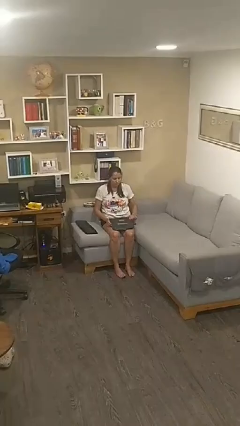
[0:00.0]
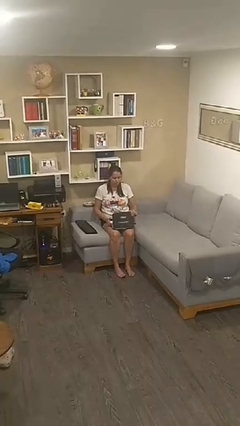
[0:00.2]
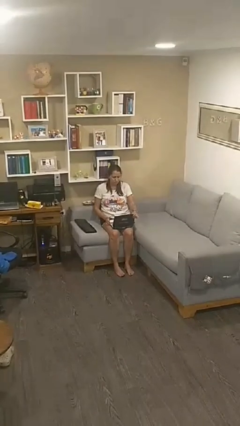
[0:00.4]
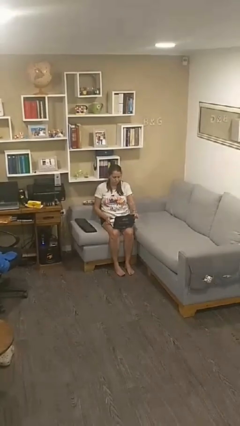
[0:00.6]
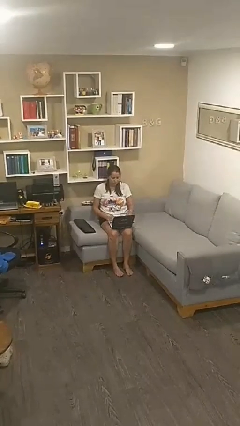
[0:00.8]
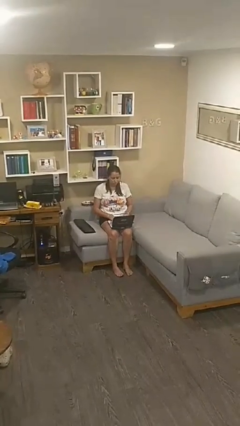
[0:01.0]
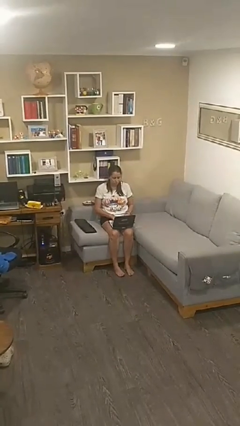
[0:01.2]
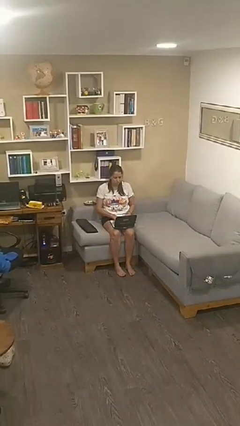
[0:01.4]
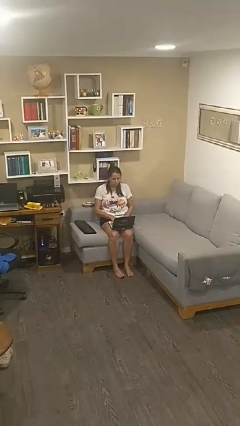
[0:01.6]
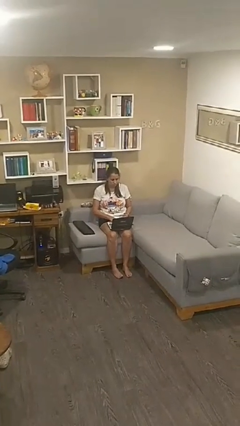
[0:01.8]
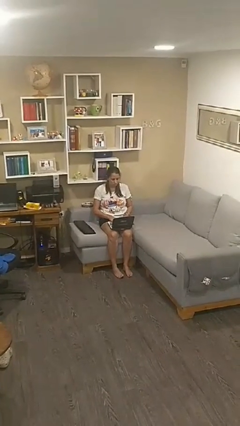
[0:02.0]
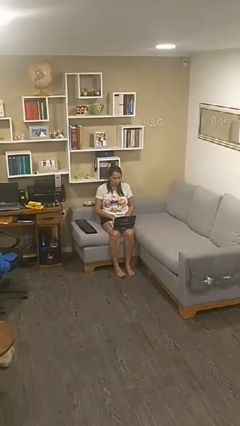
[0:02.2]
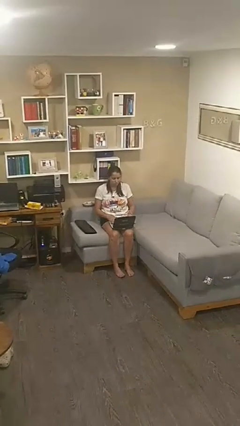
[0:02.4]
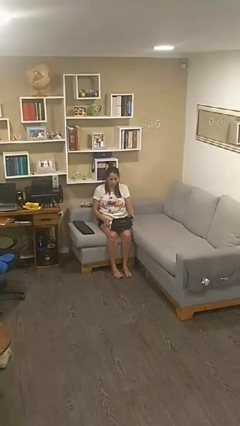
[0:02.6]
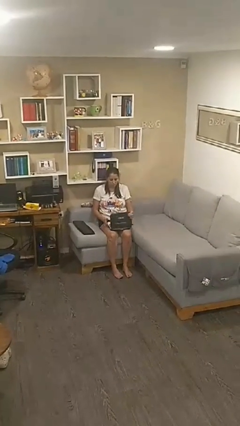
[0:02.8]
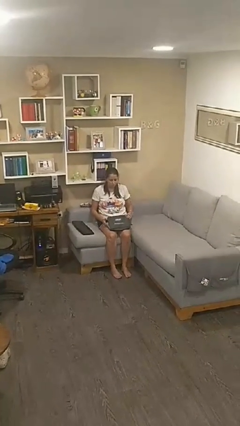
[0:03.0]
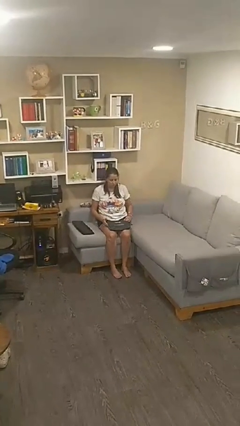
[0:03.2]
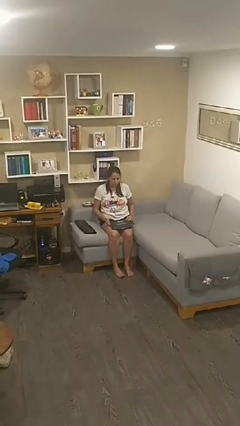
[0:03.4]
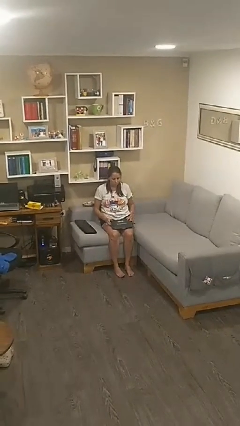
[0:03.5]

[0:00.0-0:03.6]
person interacts with laptop

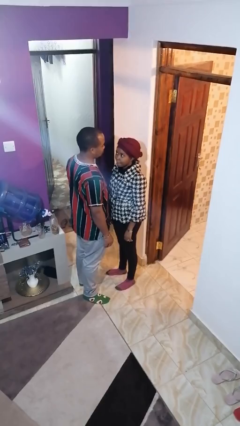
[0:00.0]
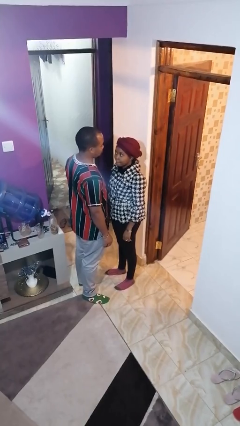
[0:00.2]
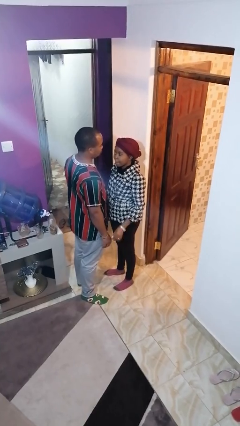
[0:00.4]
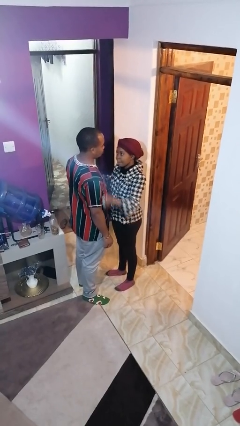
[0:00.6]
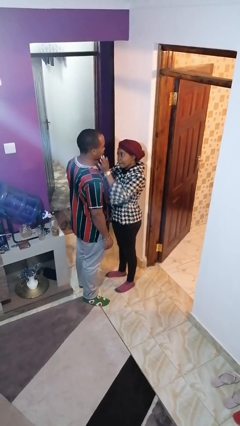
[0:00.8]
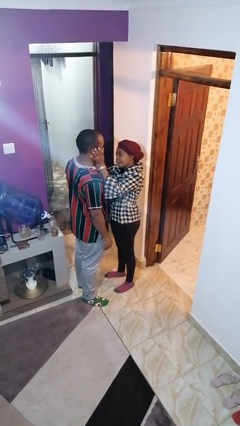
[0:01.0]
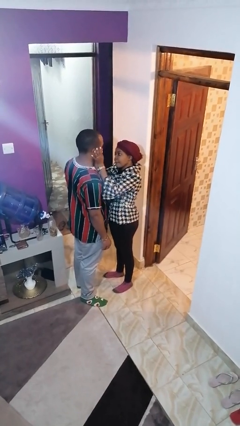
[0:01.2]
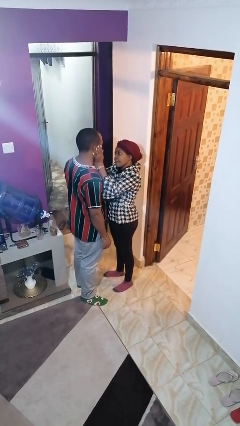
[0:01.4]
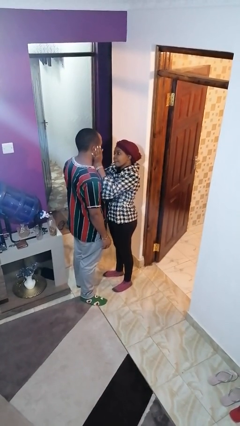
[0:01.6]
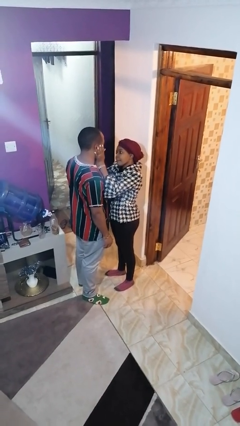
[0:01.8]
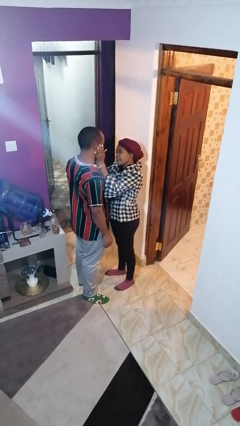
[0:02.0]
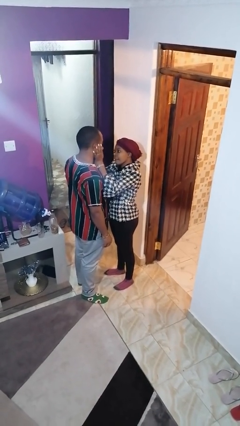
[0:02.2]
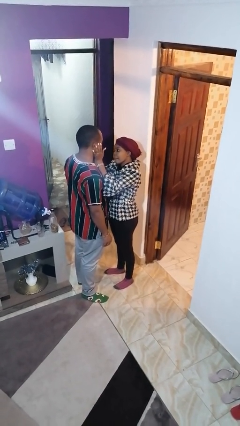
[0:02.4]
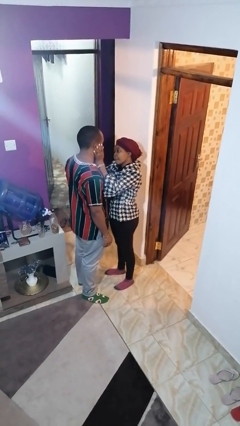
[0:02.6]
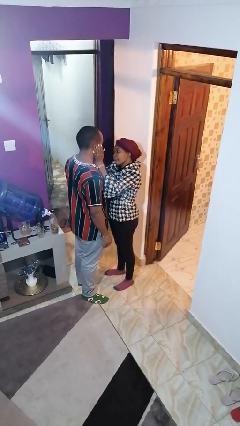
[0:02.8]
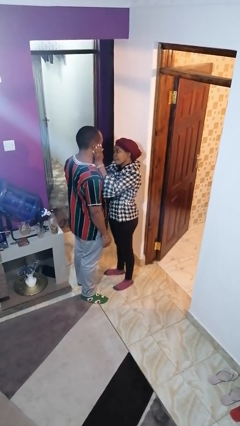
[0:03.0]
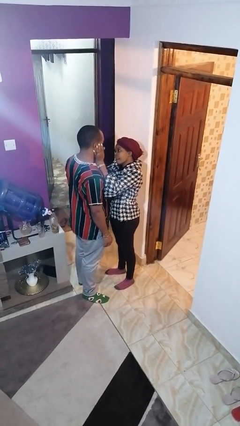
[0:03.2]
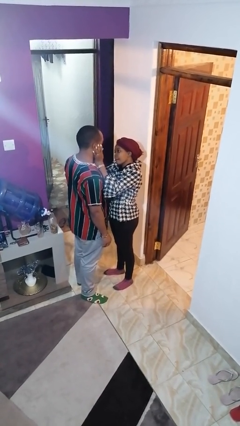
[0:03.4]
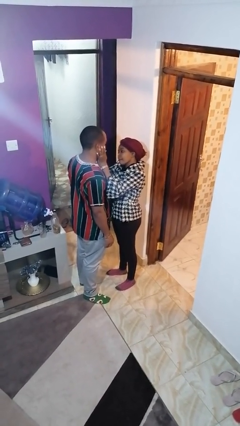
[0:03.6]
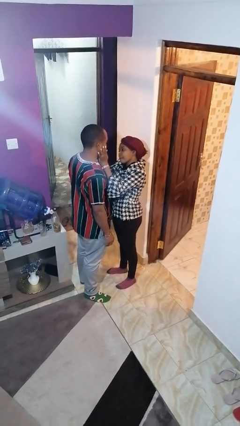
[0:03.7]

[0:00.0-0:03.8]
person touches face of person

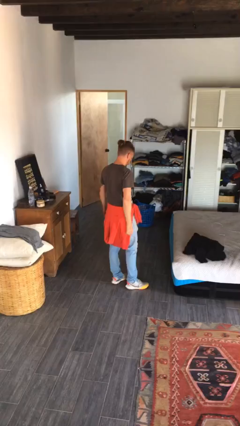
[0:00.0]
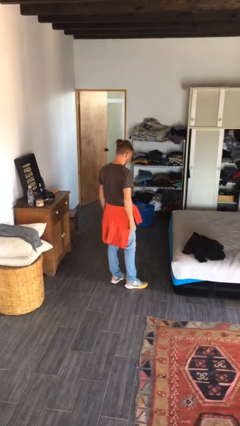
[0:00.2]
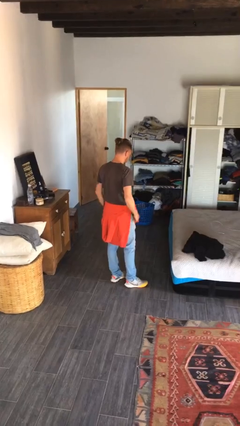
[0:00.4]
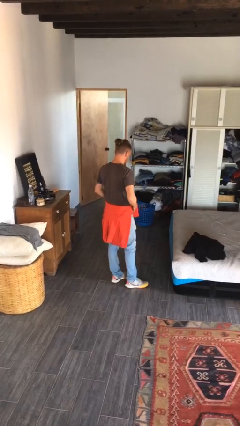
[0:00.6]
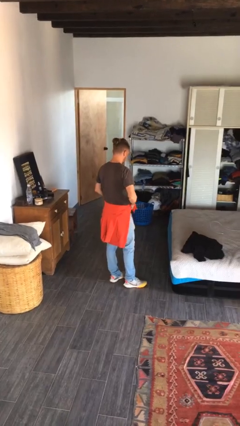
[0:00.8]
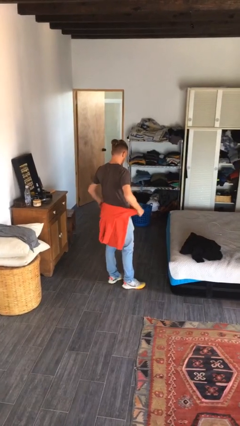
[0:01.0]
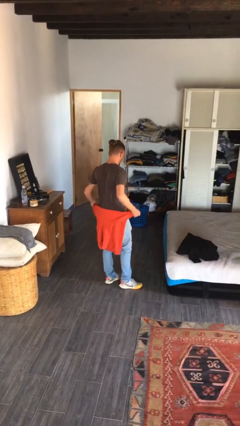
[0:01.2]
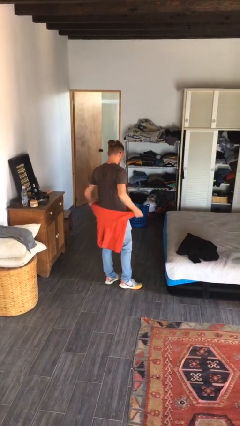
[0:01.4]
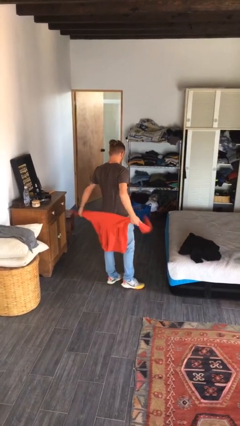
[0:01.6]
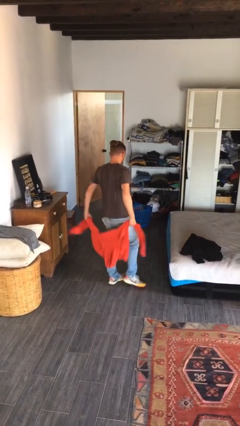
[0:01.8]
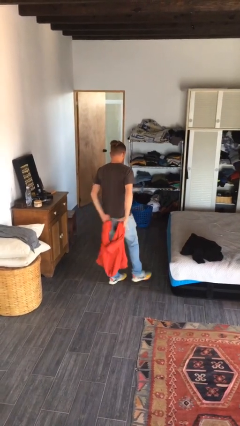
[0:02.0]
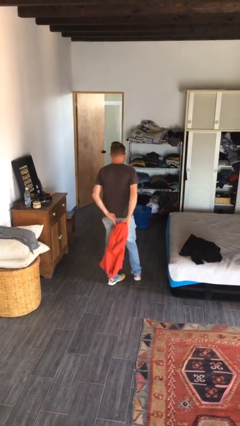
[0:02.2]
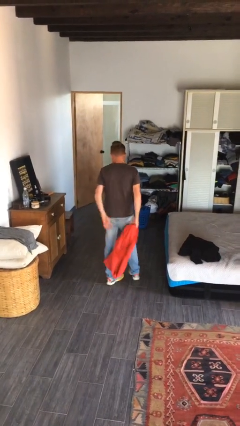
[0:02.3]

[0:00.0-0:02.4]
person unties jacket around waist

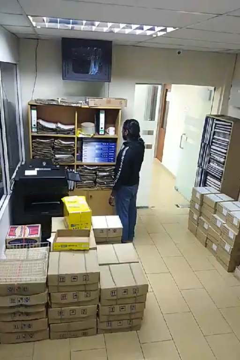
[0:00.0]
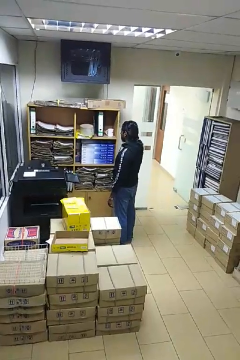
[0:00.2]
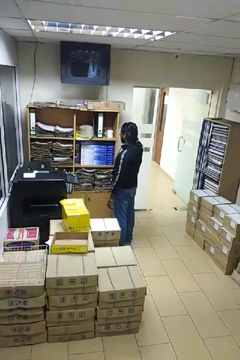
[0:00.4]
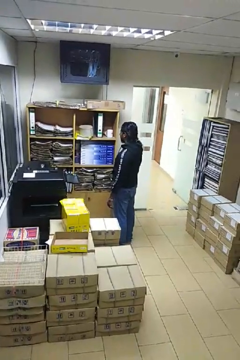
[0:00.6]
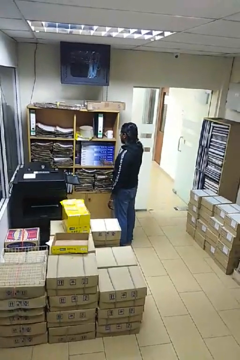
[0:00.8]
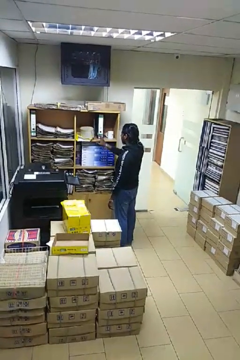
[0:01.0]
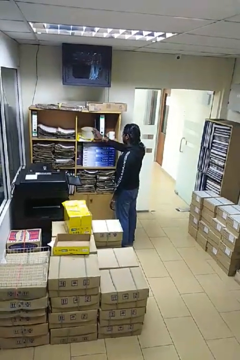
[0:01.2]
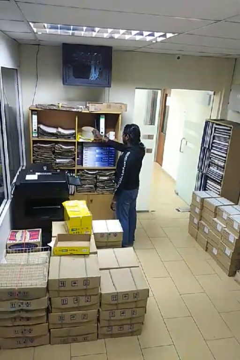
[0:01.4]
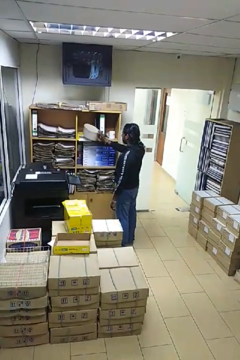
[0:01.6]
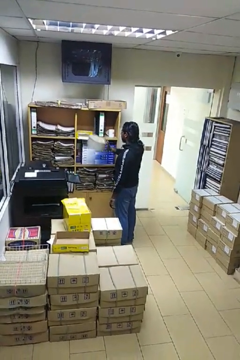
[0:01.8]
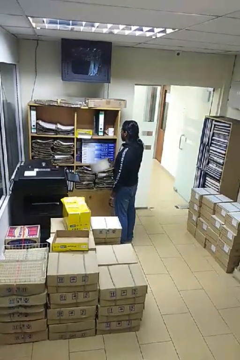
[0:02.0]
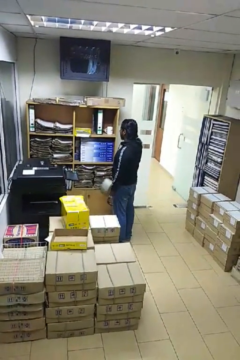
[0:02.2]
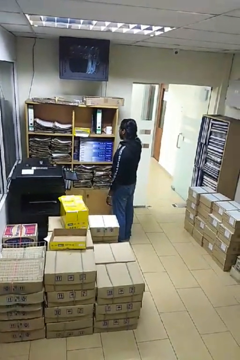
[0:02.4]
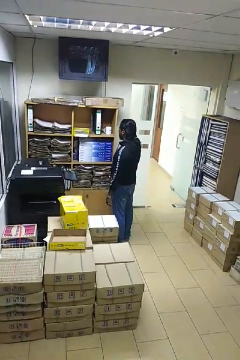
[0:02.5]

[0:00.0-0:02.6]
person picks up object from cabinet

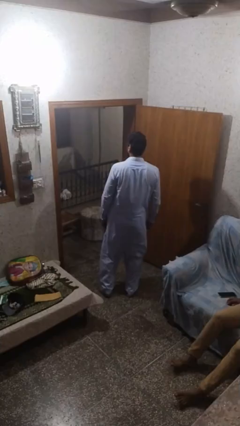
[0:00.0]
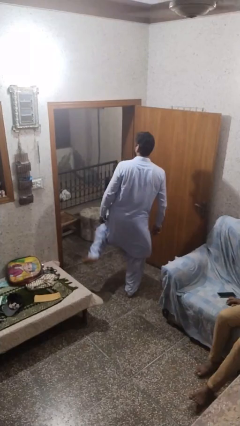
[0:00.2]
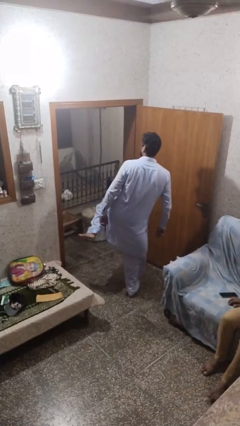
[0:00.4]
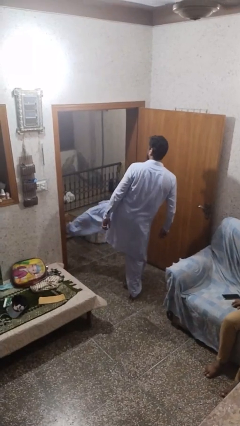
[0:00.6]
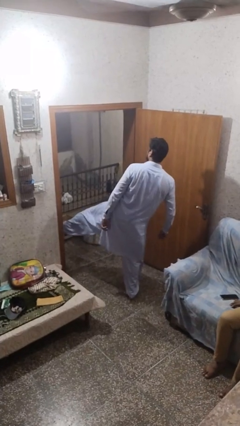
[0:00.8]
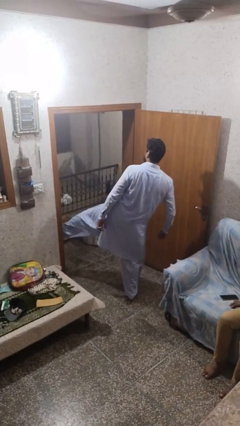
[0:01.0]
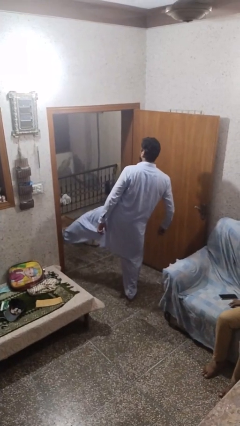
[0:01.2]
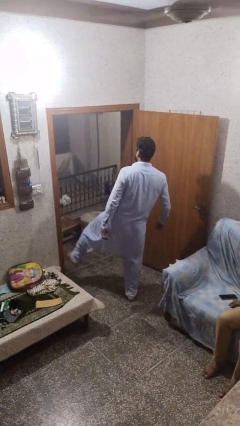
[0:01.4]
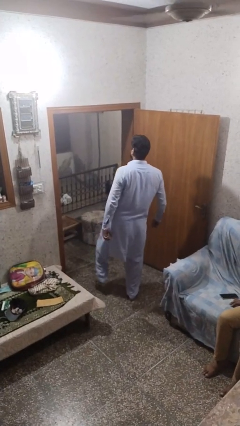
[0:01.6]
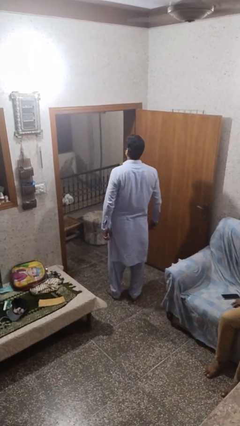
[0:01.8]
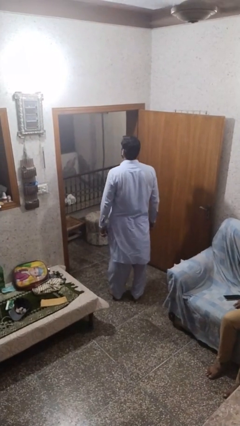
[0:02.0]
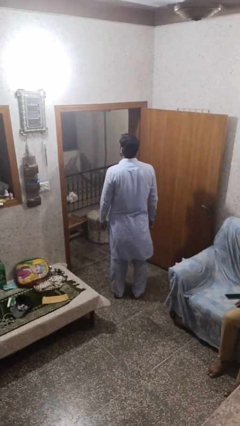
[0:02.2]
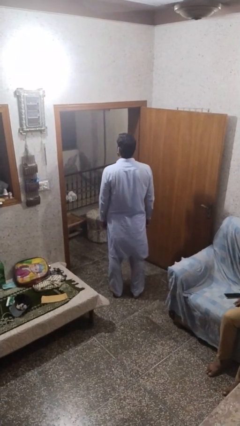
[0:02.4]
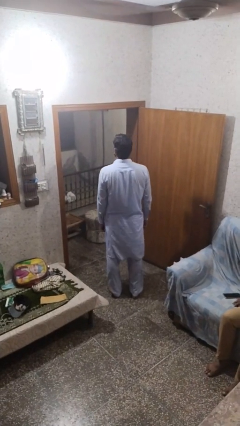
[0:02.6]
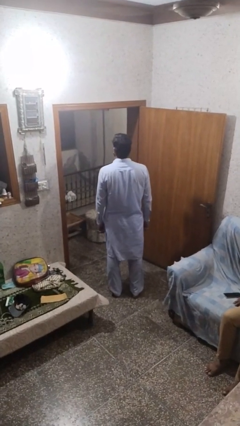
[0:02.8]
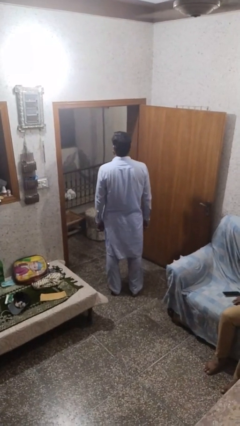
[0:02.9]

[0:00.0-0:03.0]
person karate kicks

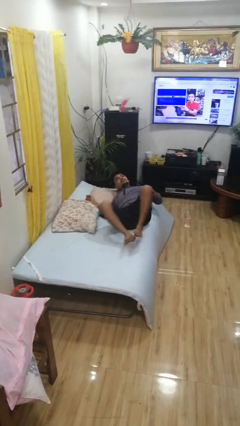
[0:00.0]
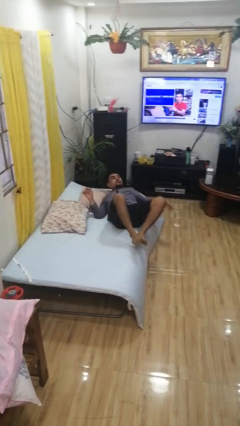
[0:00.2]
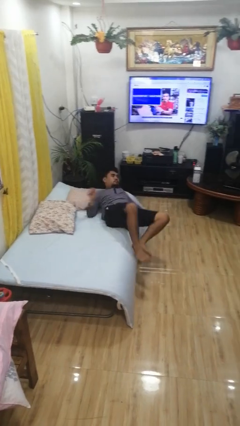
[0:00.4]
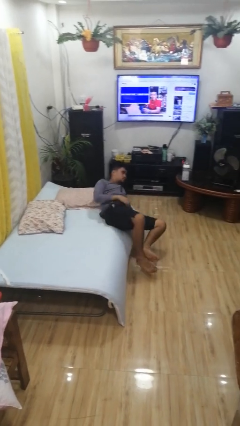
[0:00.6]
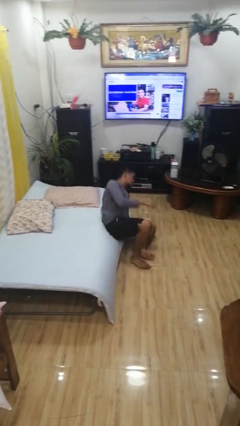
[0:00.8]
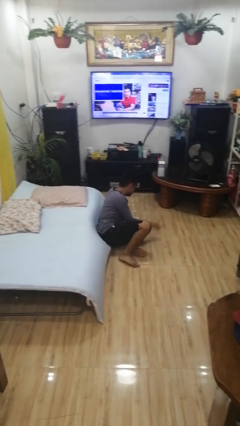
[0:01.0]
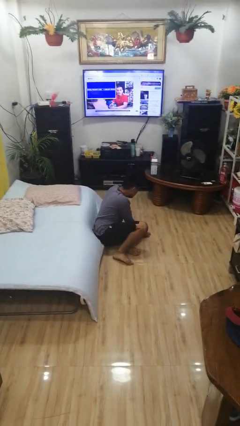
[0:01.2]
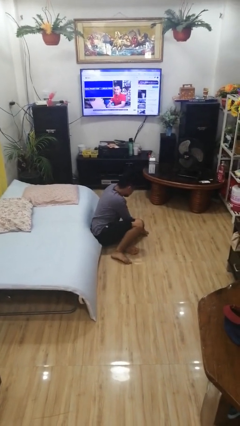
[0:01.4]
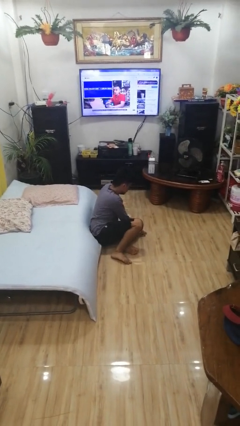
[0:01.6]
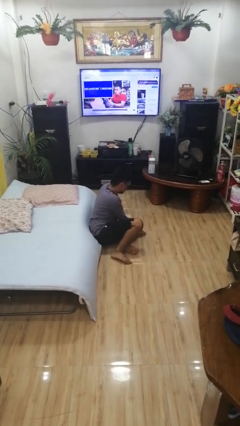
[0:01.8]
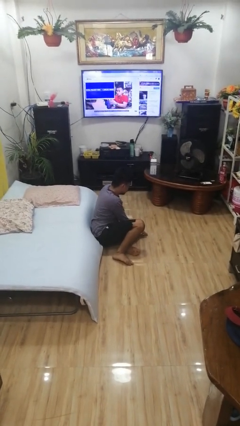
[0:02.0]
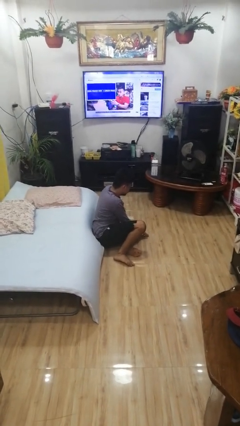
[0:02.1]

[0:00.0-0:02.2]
person falls from bed
